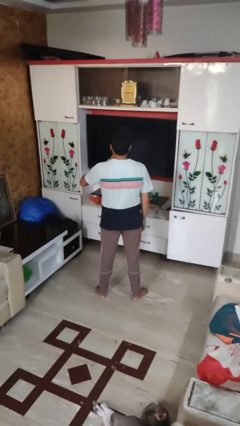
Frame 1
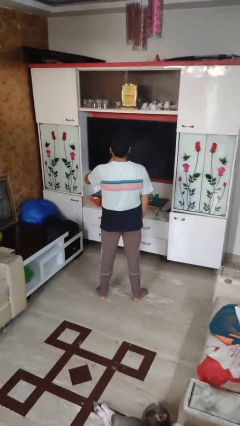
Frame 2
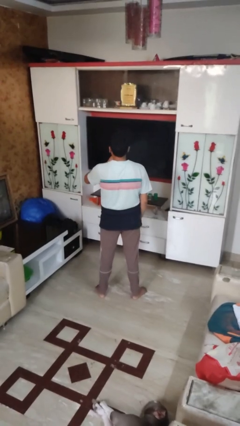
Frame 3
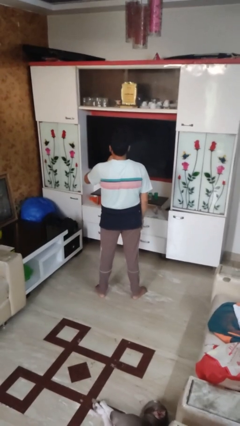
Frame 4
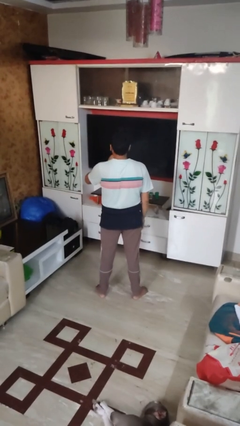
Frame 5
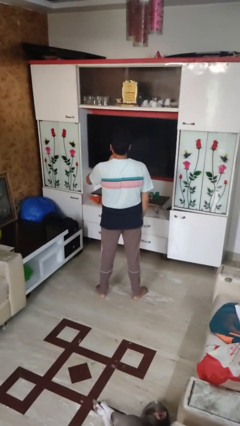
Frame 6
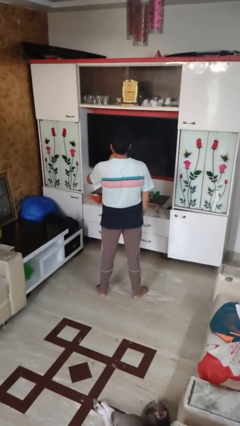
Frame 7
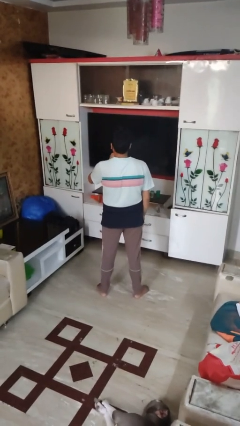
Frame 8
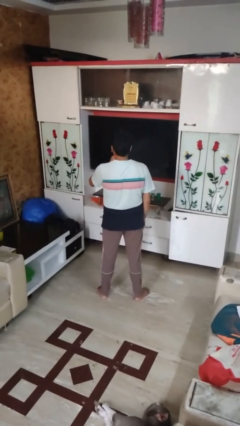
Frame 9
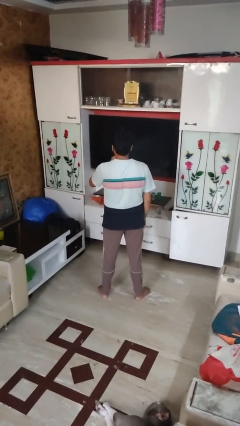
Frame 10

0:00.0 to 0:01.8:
person gestures be quiet

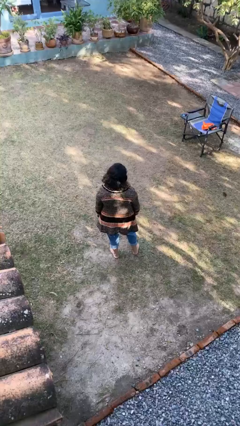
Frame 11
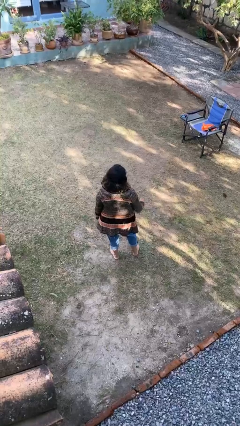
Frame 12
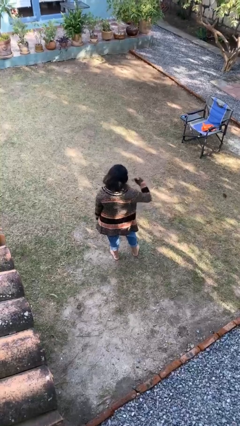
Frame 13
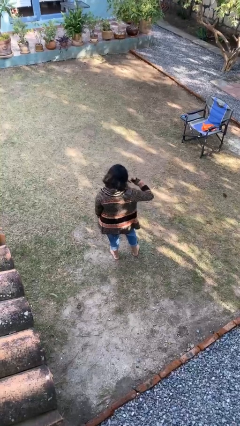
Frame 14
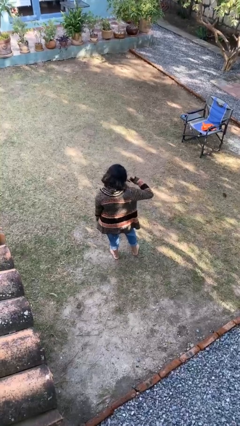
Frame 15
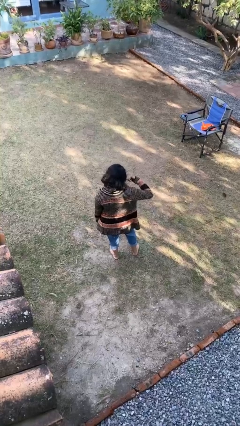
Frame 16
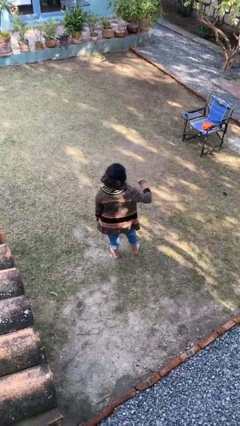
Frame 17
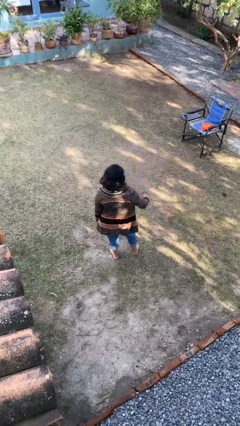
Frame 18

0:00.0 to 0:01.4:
person gestures call me

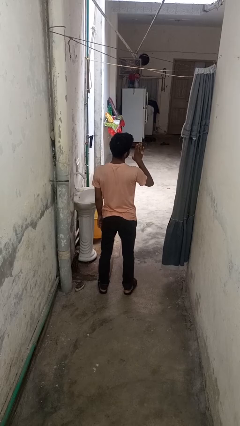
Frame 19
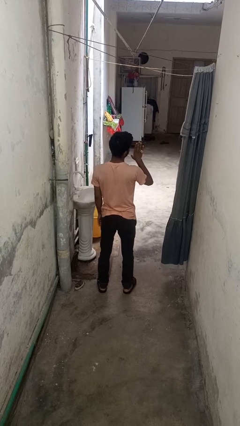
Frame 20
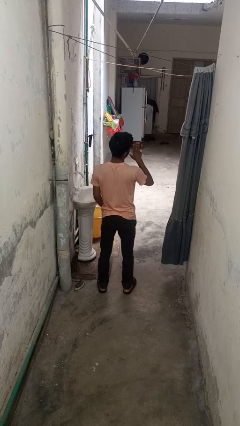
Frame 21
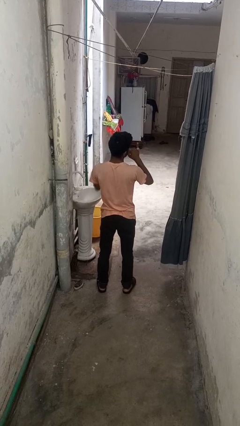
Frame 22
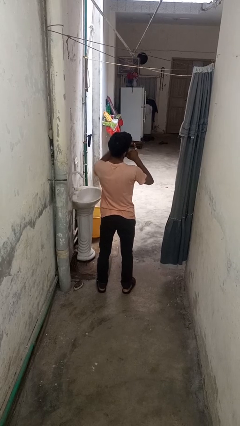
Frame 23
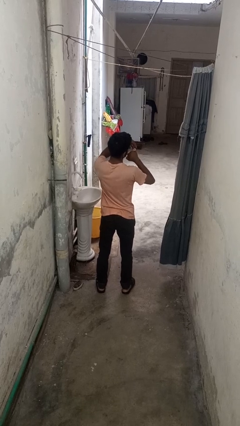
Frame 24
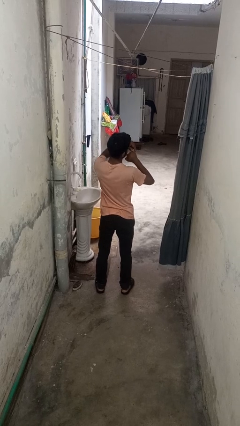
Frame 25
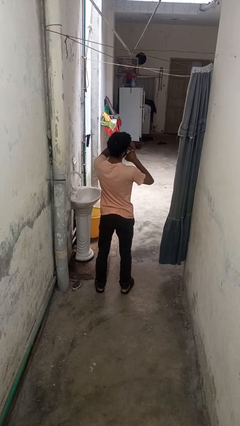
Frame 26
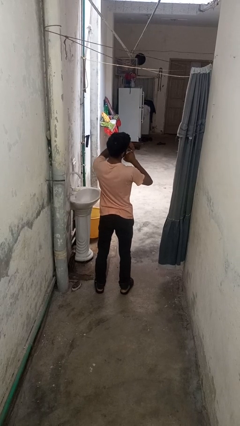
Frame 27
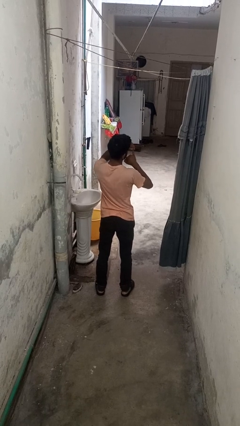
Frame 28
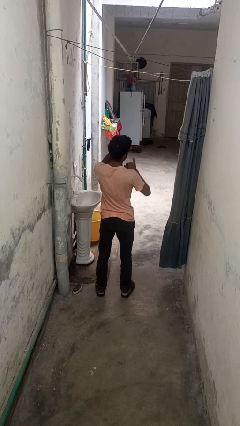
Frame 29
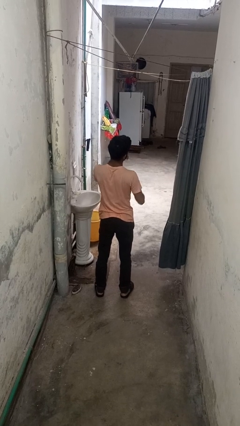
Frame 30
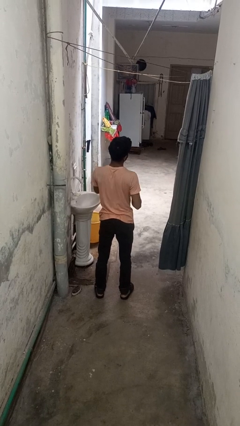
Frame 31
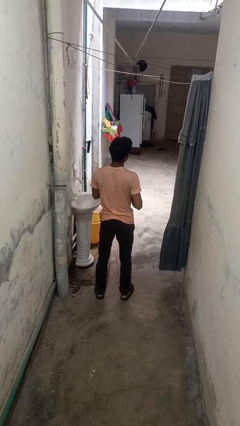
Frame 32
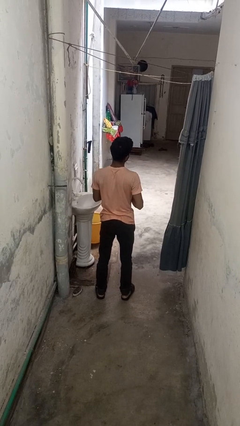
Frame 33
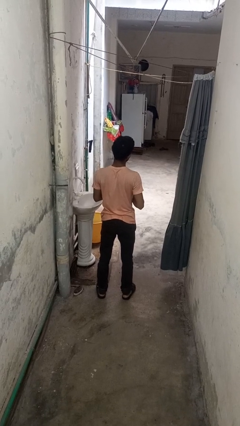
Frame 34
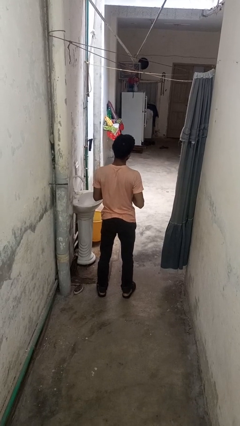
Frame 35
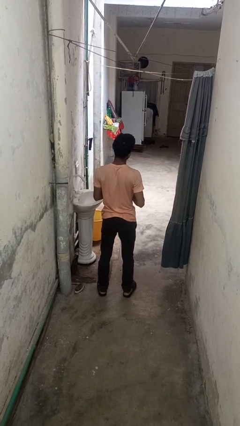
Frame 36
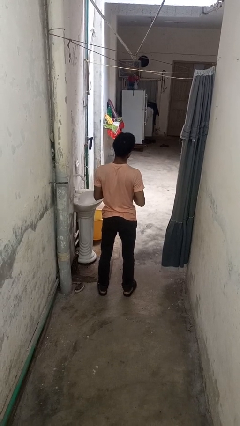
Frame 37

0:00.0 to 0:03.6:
person takes off ring

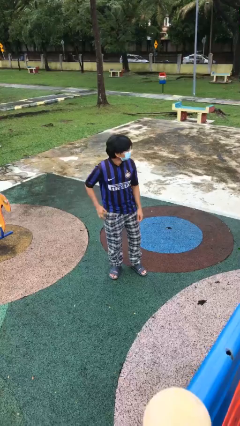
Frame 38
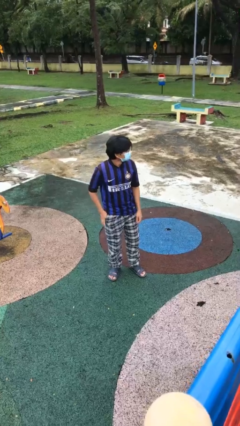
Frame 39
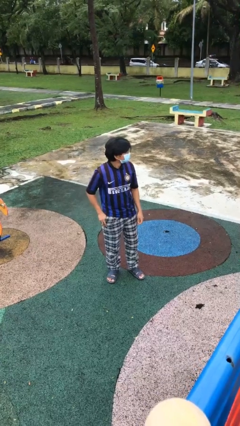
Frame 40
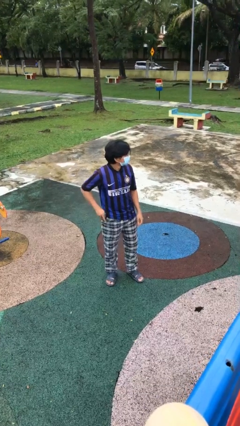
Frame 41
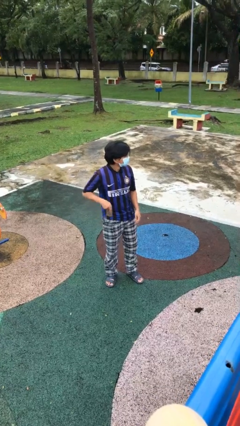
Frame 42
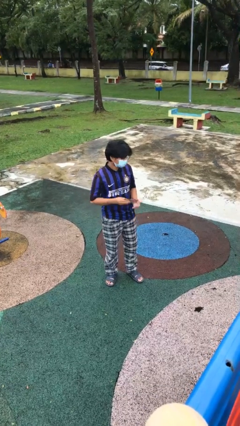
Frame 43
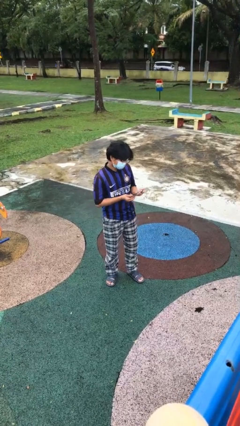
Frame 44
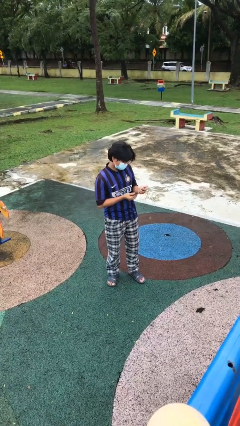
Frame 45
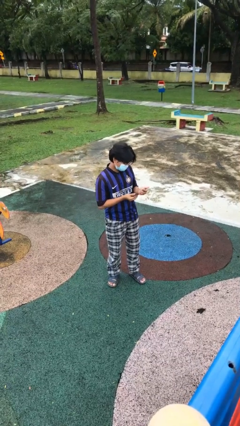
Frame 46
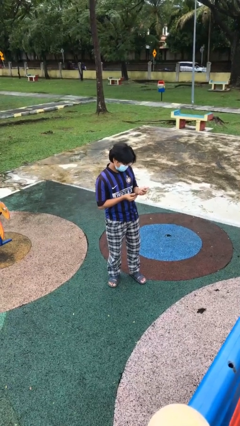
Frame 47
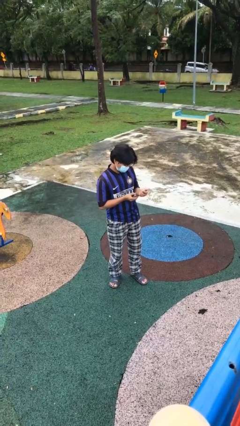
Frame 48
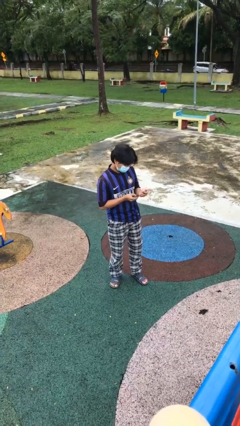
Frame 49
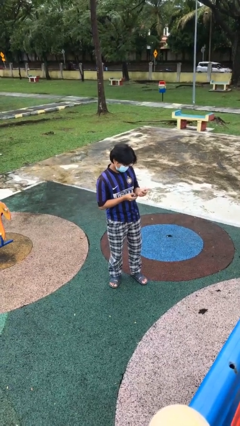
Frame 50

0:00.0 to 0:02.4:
person takes phone from pocket

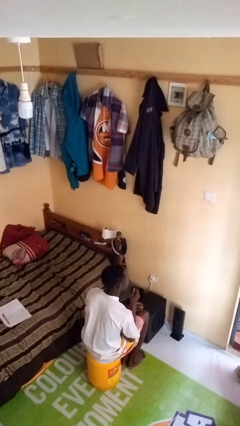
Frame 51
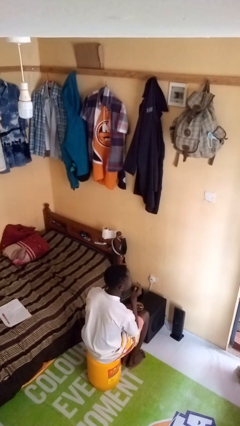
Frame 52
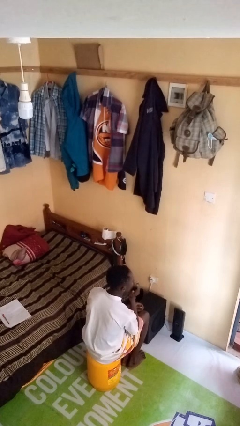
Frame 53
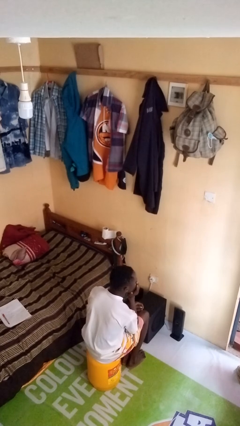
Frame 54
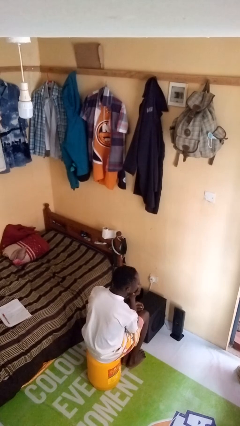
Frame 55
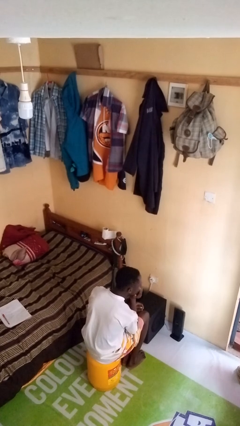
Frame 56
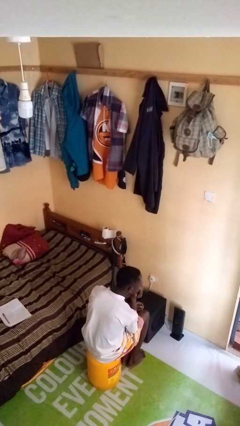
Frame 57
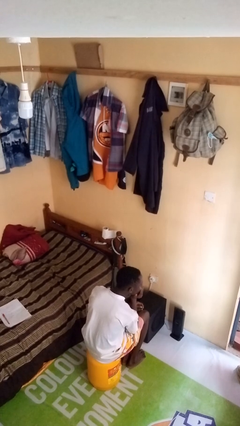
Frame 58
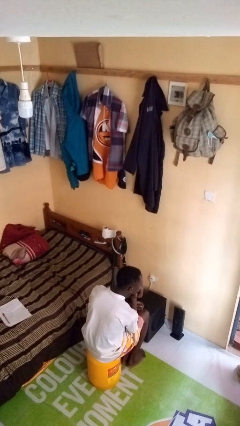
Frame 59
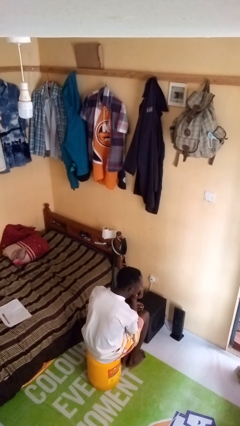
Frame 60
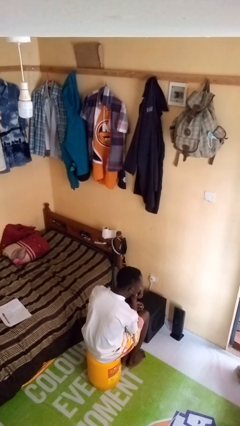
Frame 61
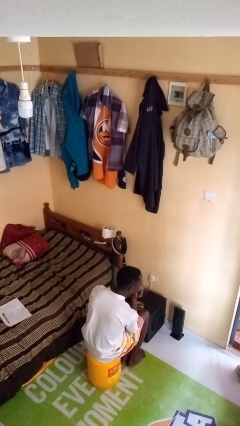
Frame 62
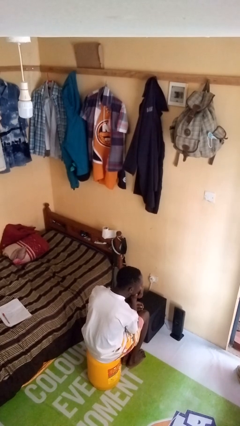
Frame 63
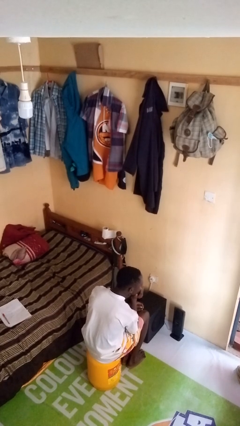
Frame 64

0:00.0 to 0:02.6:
person strokes chin

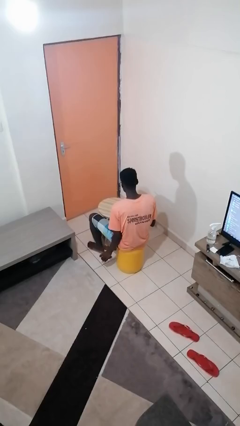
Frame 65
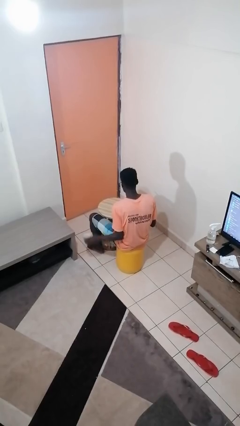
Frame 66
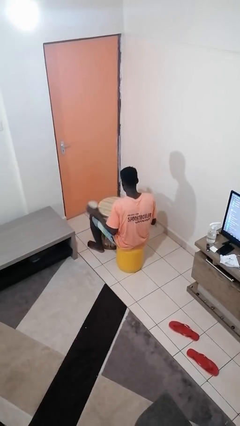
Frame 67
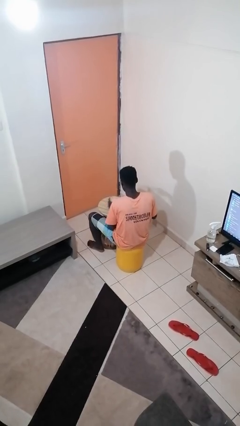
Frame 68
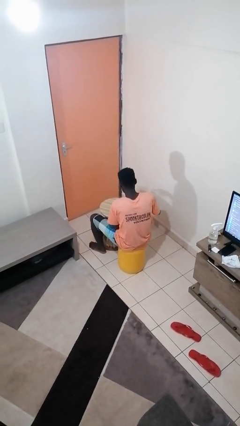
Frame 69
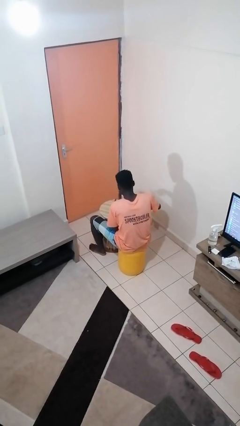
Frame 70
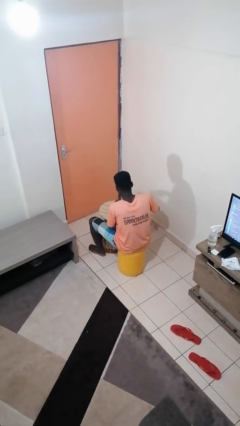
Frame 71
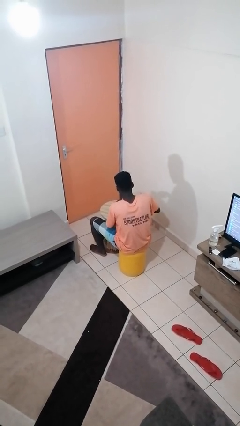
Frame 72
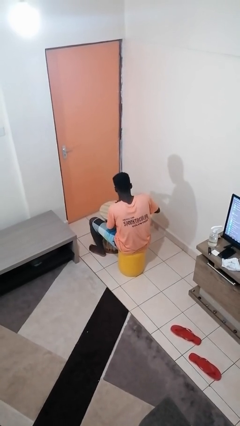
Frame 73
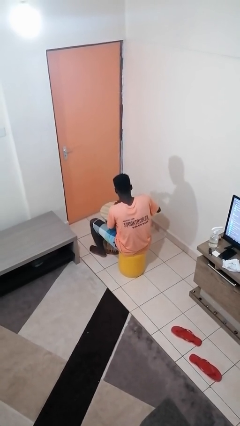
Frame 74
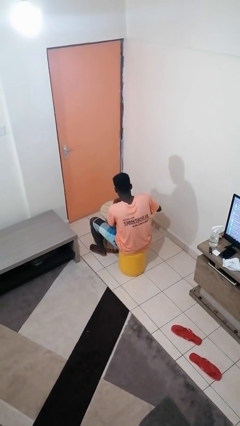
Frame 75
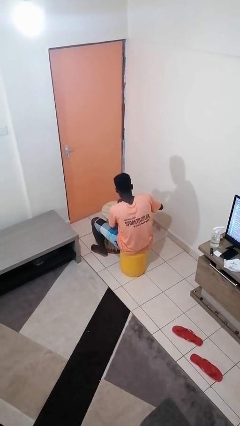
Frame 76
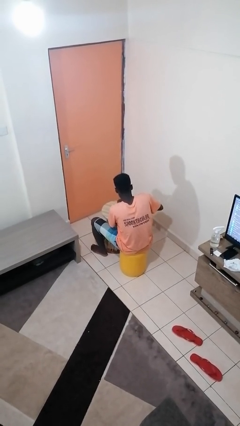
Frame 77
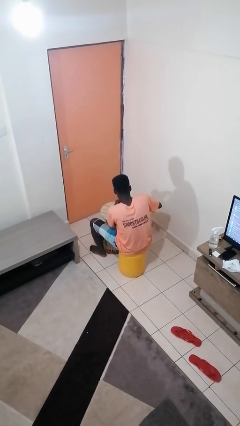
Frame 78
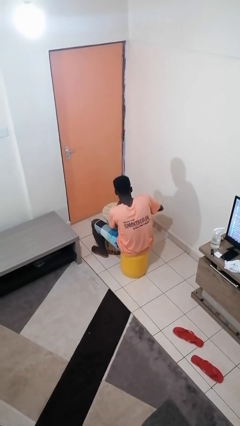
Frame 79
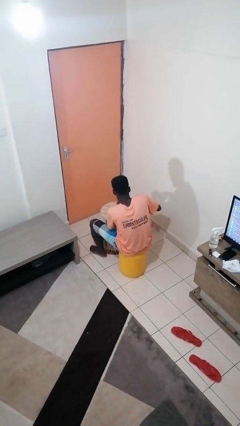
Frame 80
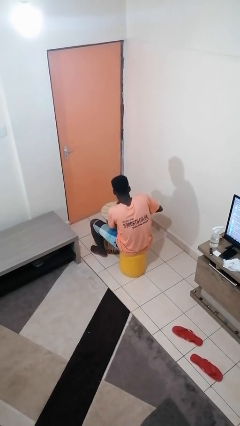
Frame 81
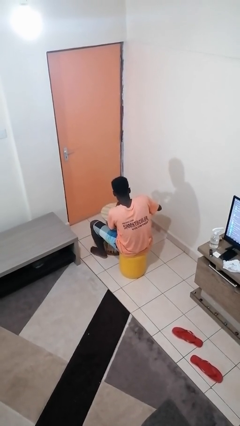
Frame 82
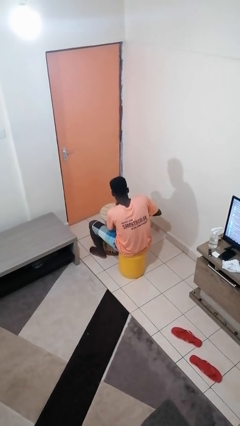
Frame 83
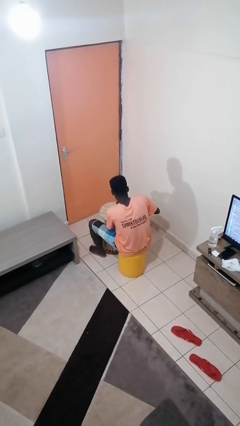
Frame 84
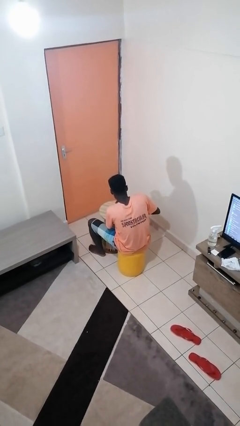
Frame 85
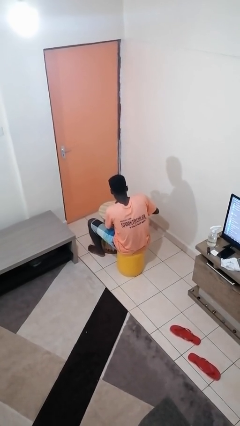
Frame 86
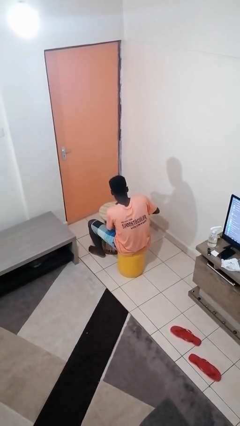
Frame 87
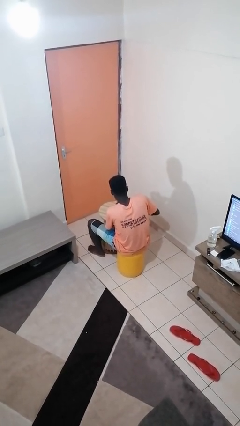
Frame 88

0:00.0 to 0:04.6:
person opens can with can opener

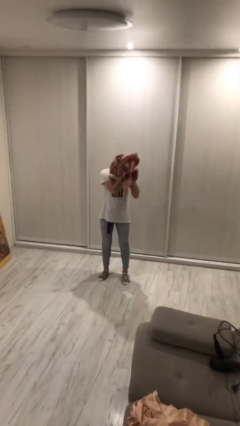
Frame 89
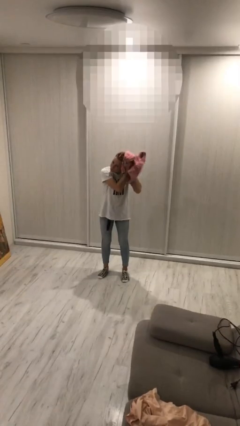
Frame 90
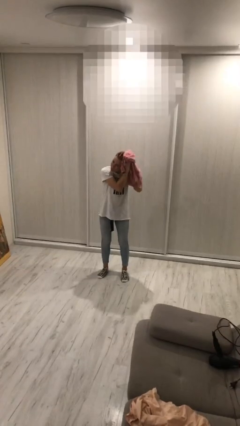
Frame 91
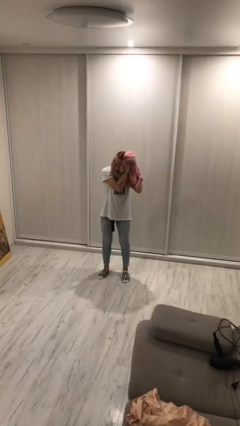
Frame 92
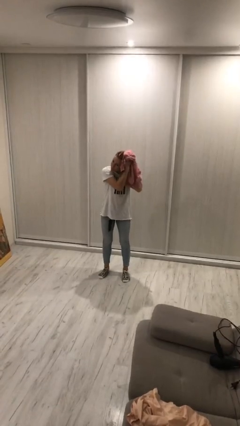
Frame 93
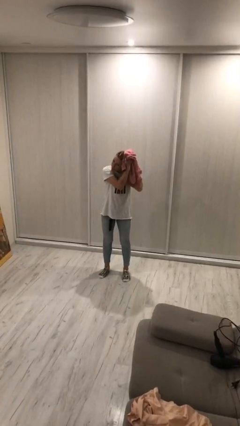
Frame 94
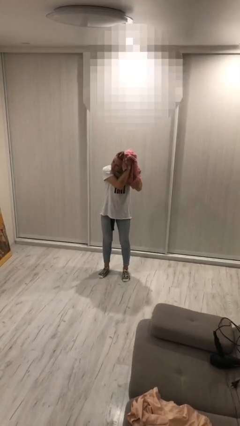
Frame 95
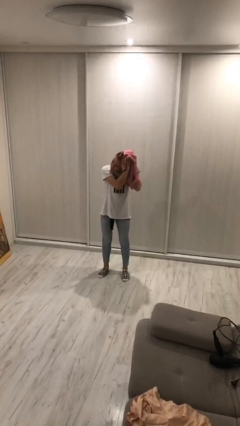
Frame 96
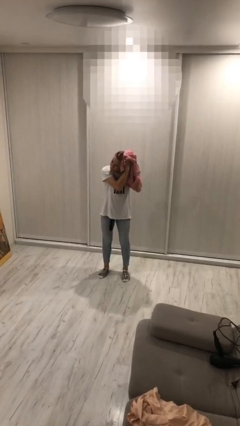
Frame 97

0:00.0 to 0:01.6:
person dries hair with towel
